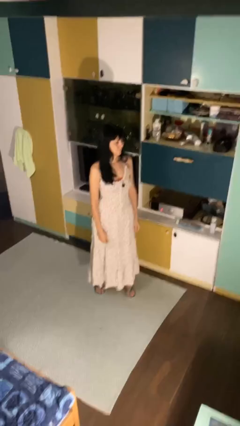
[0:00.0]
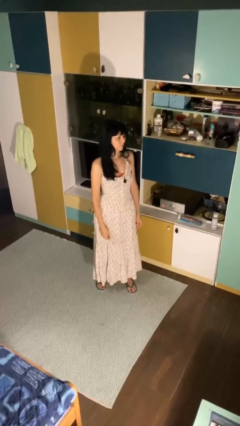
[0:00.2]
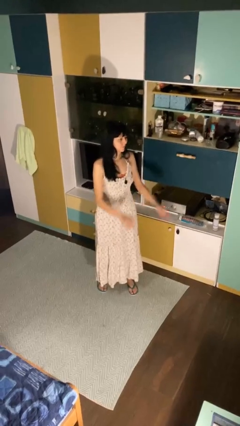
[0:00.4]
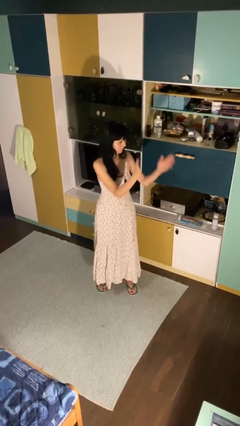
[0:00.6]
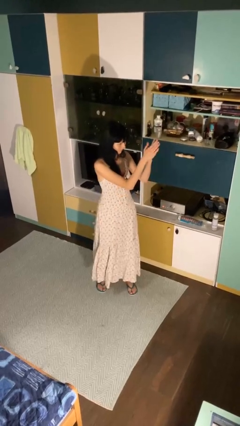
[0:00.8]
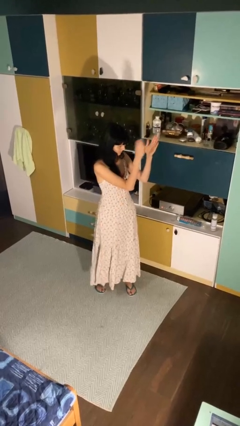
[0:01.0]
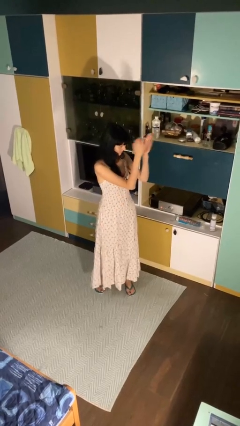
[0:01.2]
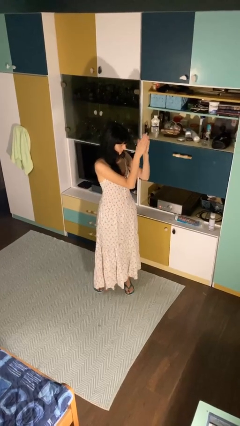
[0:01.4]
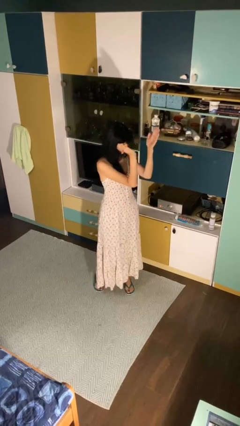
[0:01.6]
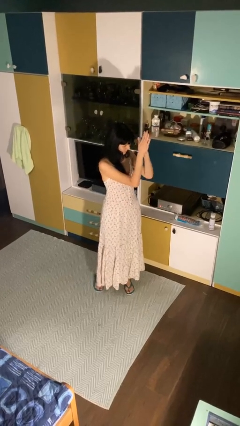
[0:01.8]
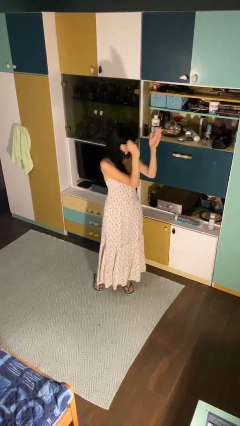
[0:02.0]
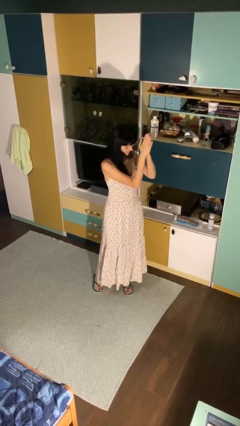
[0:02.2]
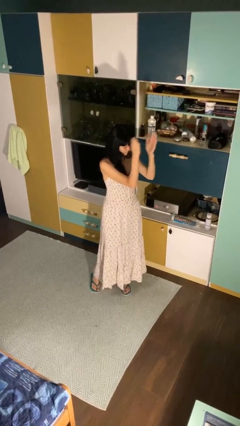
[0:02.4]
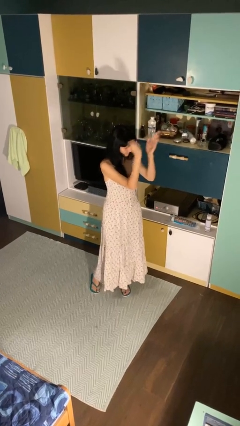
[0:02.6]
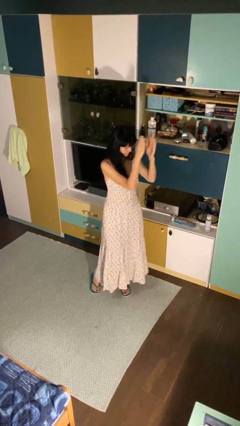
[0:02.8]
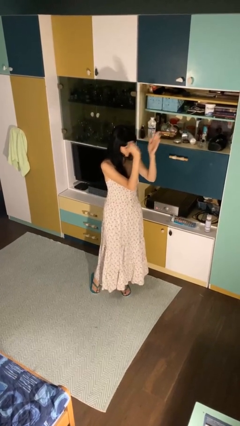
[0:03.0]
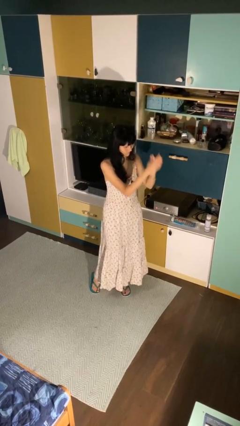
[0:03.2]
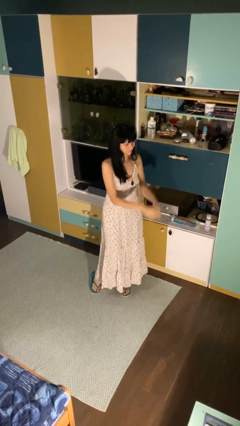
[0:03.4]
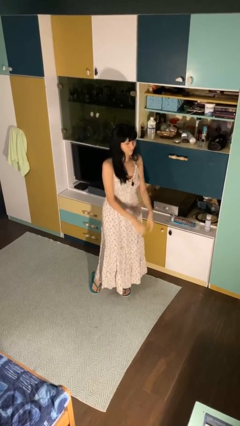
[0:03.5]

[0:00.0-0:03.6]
person claps hands

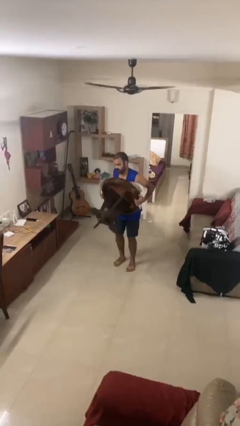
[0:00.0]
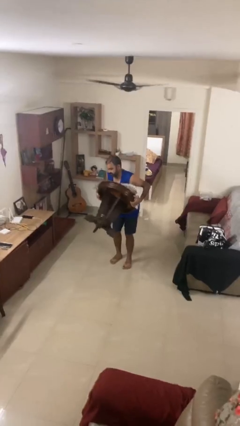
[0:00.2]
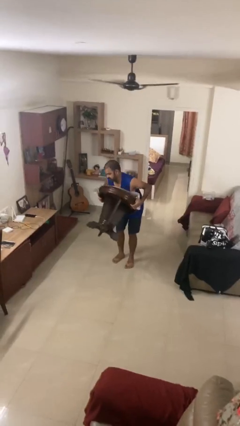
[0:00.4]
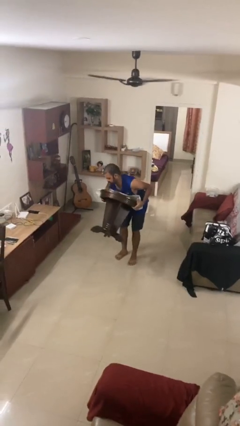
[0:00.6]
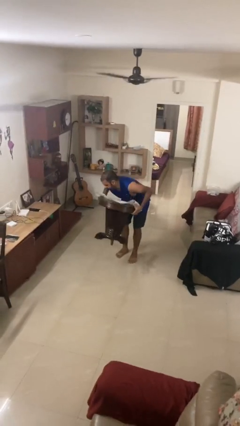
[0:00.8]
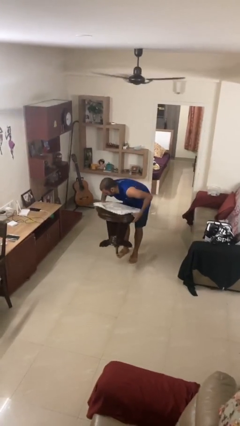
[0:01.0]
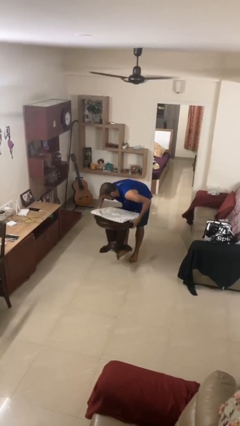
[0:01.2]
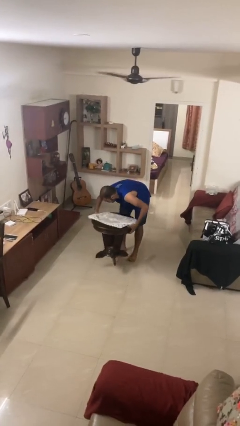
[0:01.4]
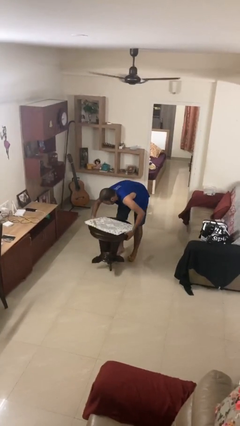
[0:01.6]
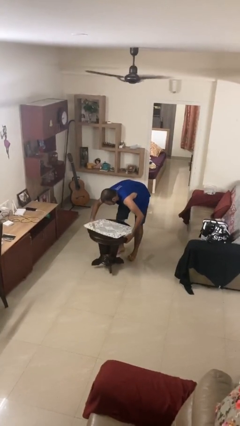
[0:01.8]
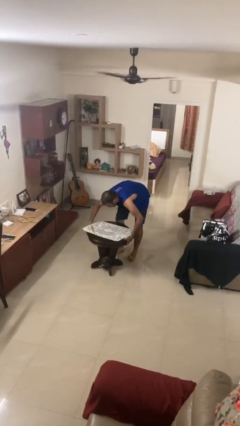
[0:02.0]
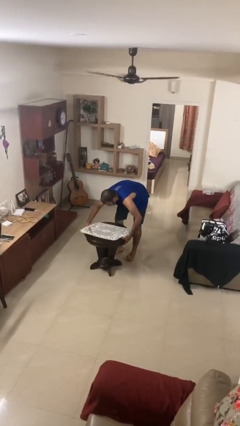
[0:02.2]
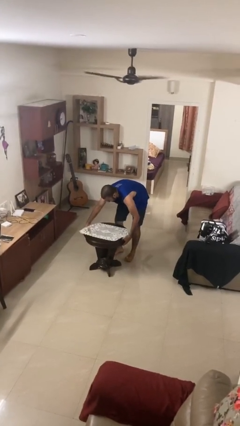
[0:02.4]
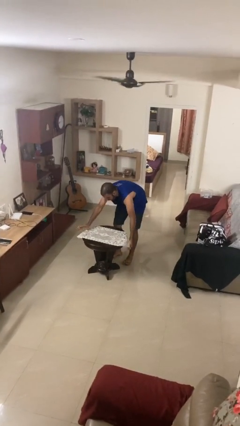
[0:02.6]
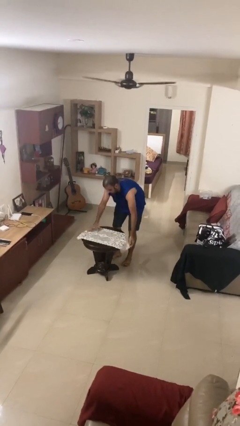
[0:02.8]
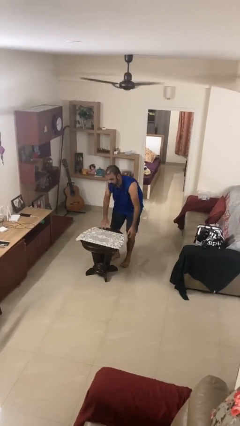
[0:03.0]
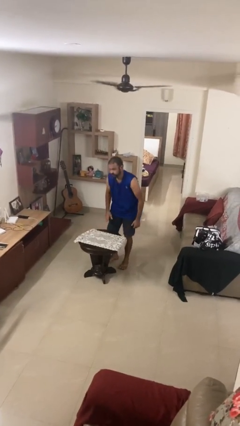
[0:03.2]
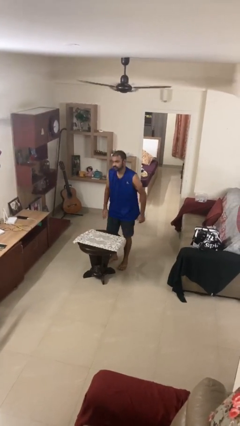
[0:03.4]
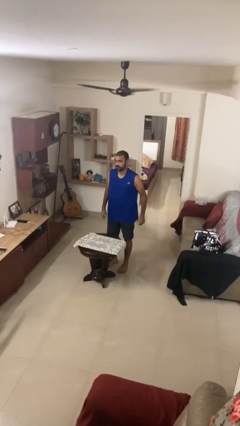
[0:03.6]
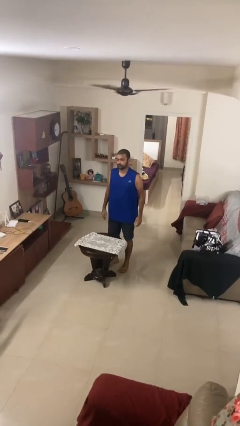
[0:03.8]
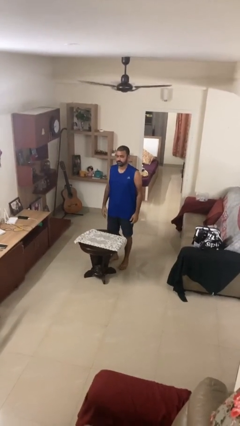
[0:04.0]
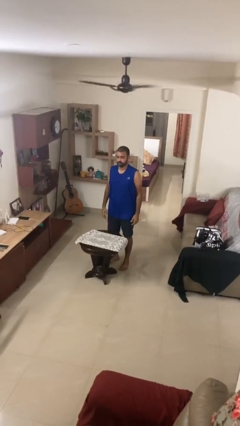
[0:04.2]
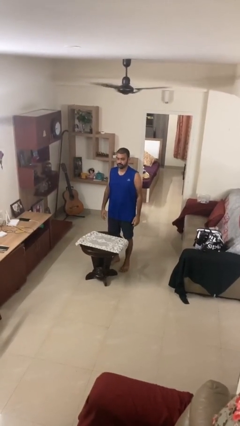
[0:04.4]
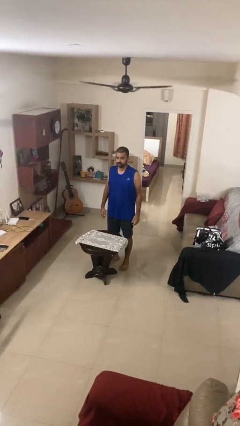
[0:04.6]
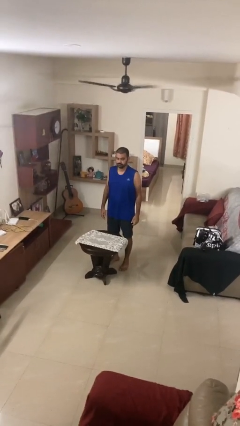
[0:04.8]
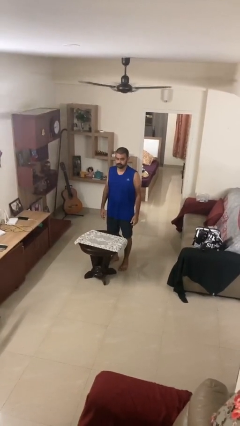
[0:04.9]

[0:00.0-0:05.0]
person puts down object on floor

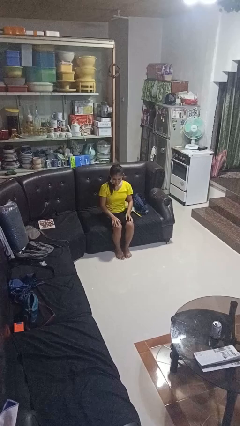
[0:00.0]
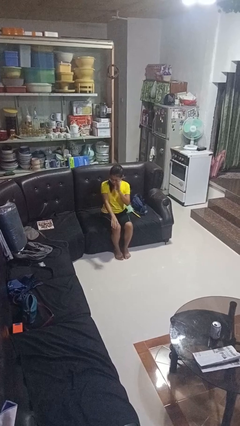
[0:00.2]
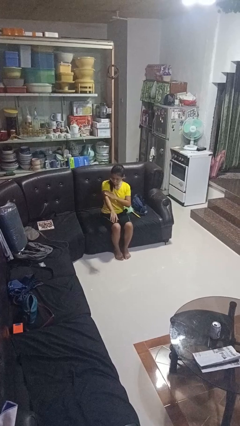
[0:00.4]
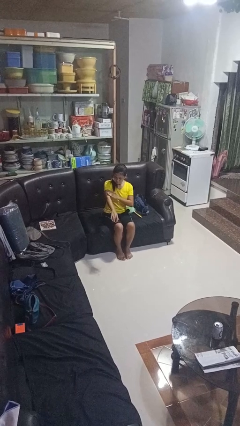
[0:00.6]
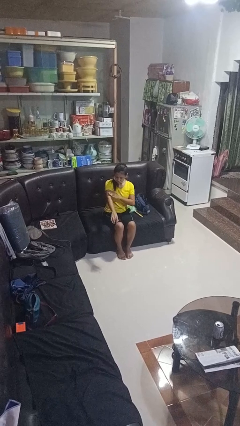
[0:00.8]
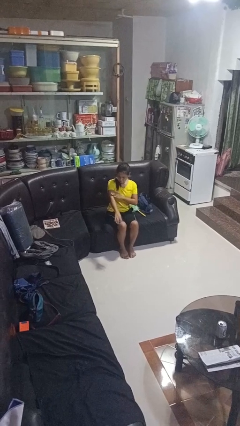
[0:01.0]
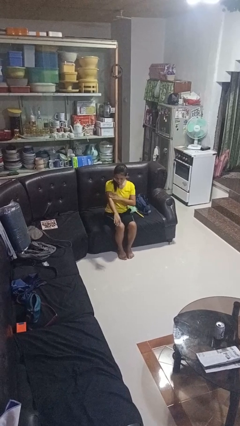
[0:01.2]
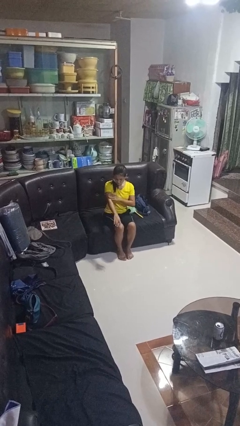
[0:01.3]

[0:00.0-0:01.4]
person swats bug

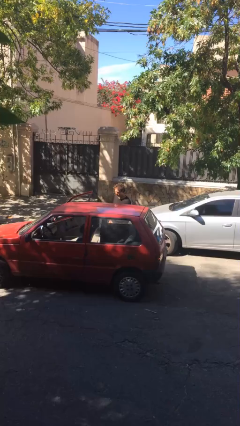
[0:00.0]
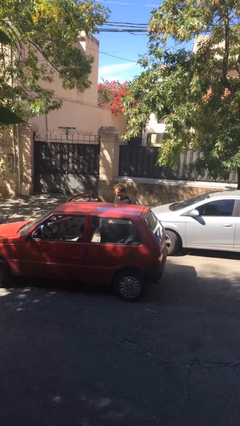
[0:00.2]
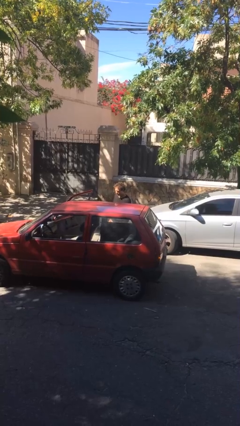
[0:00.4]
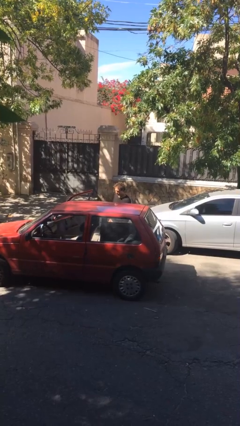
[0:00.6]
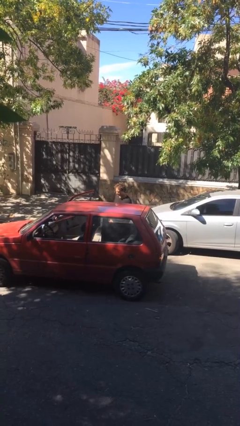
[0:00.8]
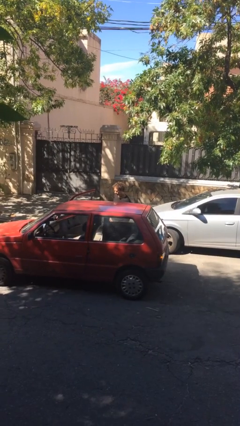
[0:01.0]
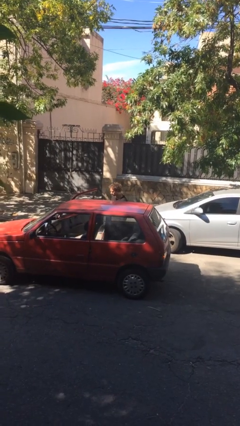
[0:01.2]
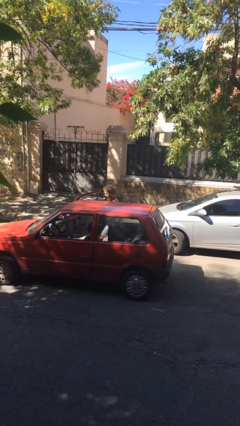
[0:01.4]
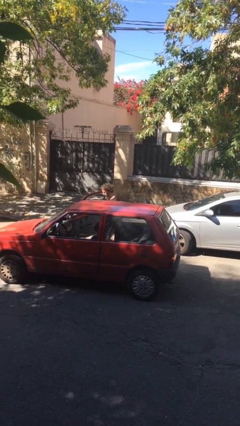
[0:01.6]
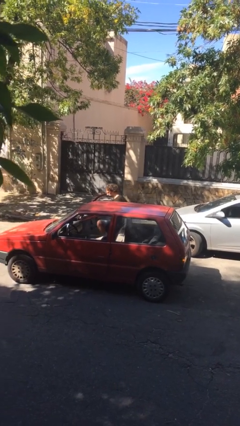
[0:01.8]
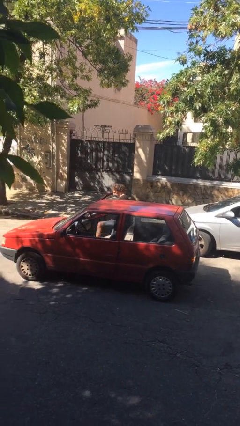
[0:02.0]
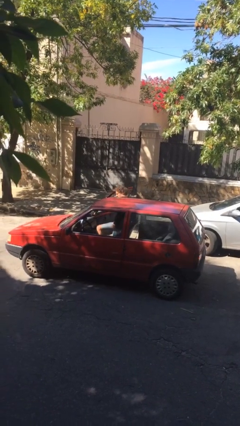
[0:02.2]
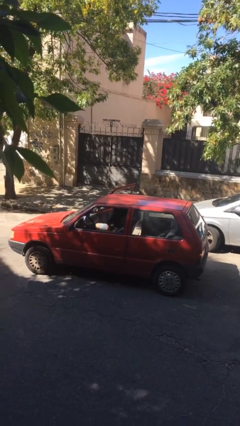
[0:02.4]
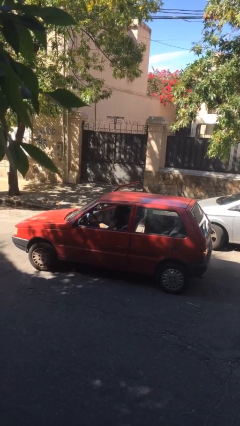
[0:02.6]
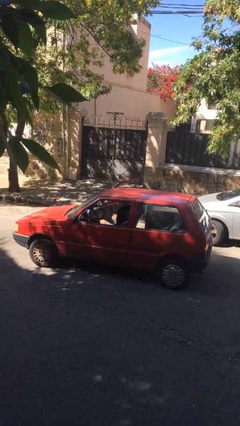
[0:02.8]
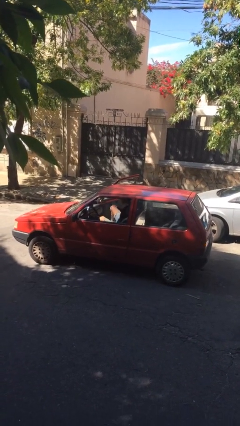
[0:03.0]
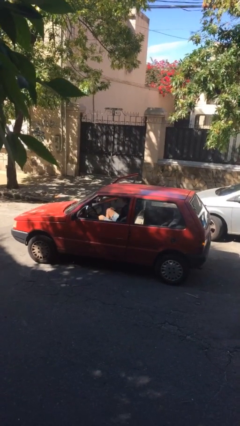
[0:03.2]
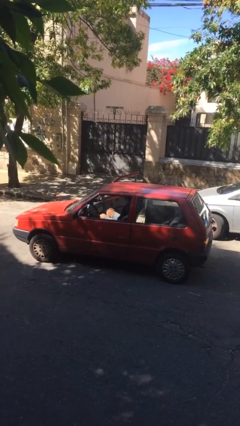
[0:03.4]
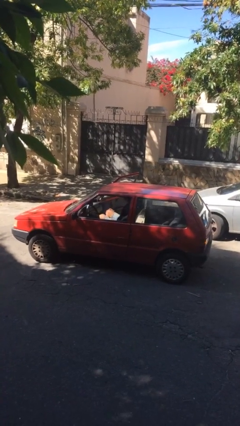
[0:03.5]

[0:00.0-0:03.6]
person enters car

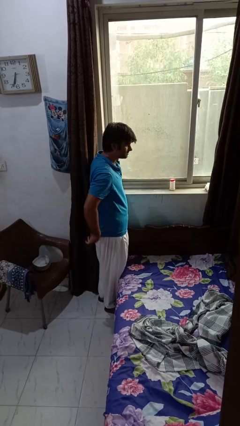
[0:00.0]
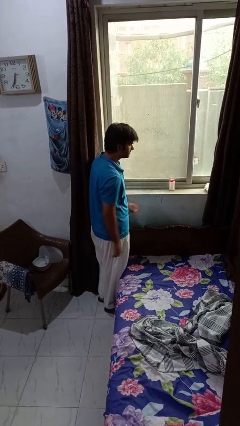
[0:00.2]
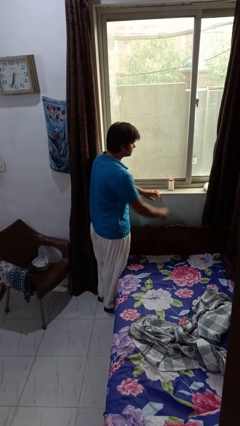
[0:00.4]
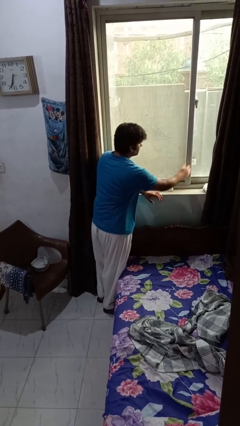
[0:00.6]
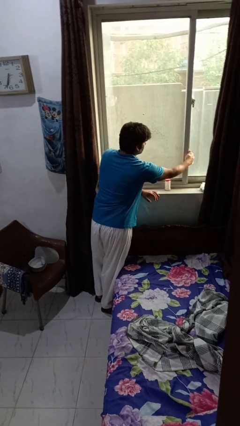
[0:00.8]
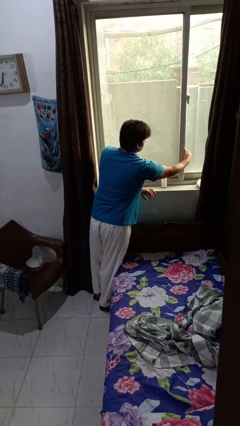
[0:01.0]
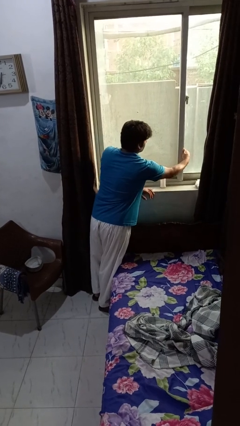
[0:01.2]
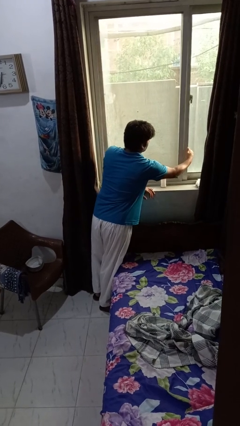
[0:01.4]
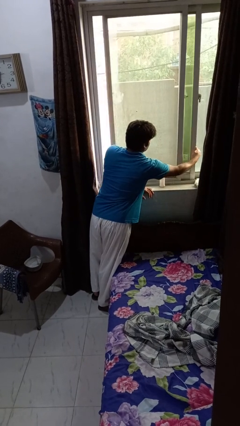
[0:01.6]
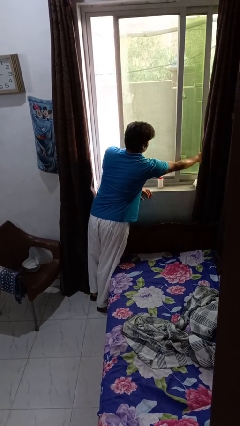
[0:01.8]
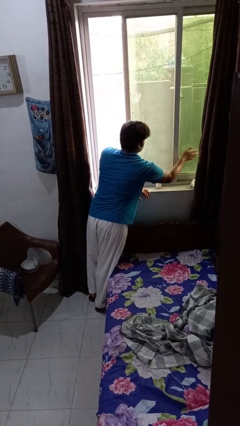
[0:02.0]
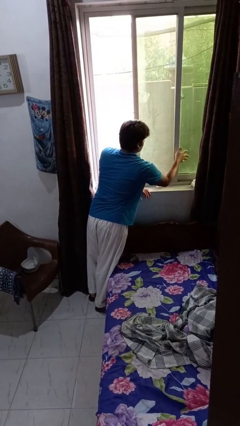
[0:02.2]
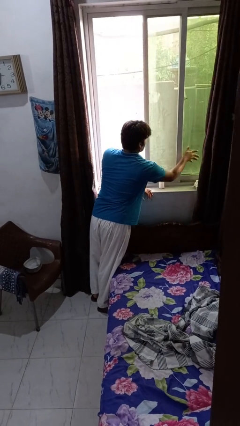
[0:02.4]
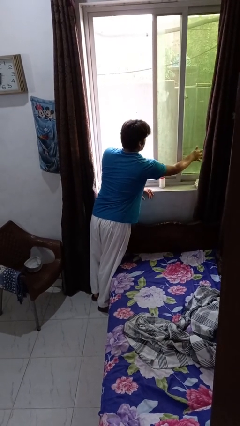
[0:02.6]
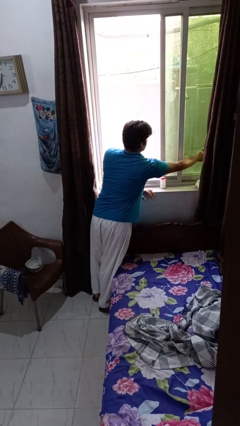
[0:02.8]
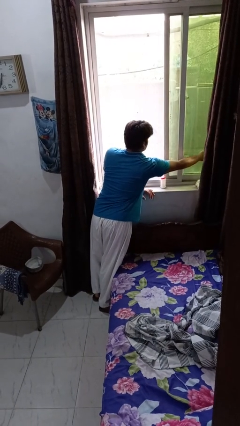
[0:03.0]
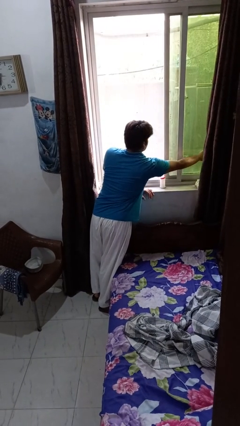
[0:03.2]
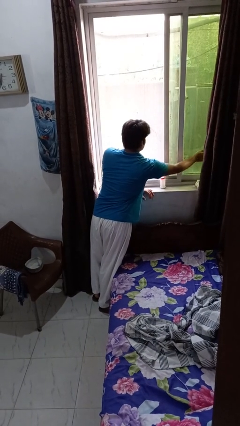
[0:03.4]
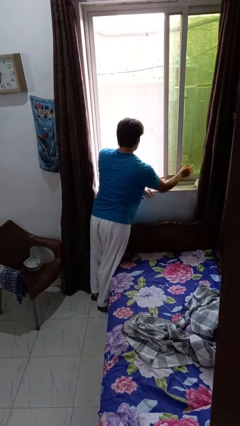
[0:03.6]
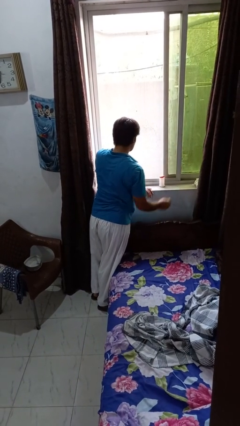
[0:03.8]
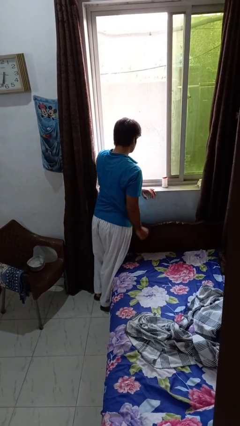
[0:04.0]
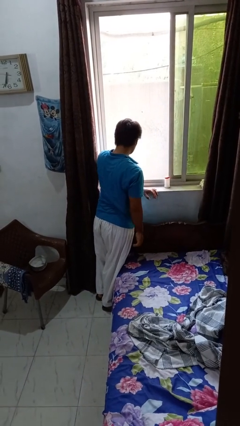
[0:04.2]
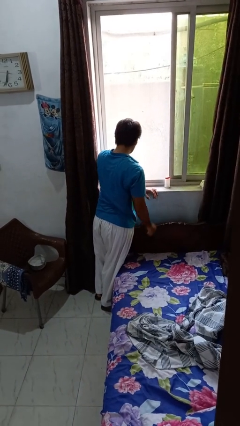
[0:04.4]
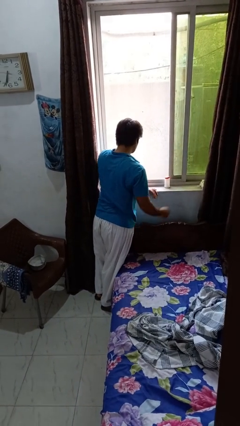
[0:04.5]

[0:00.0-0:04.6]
person opens home window
